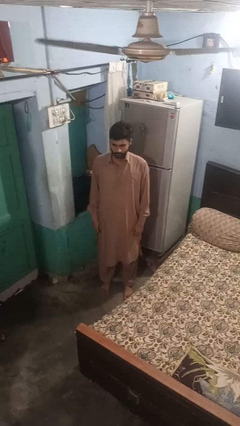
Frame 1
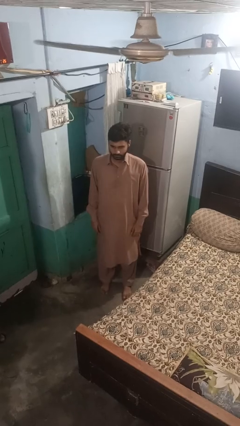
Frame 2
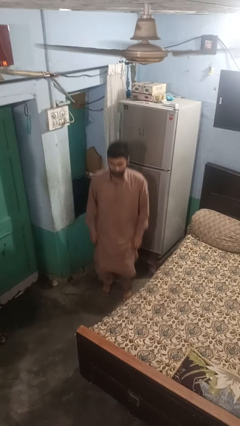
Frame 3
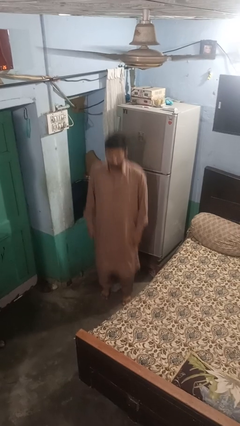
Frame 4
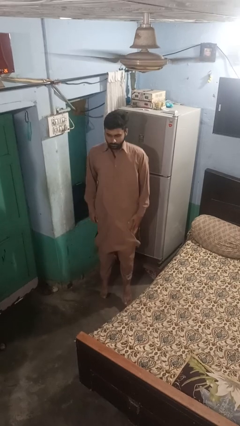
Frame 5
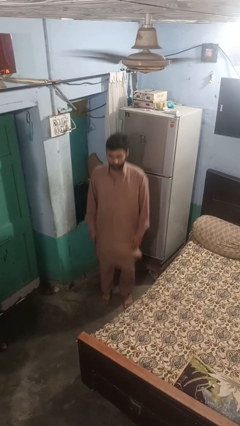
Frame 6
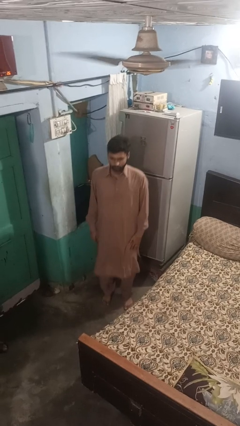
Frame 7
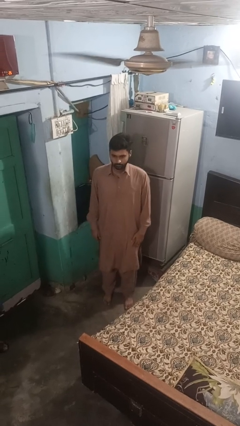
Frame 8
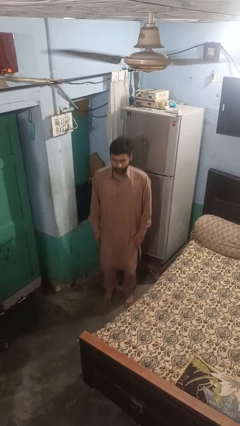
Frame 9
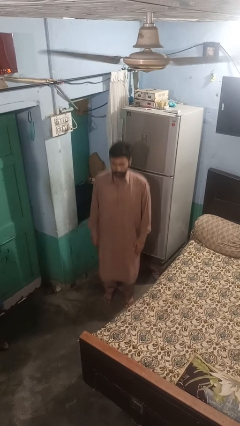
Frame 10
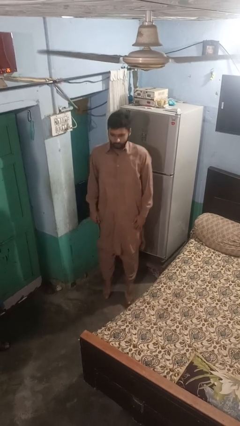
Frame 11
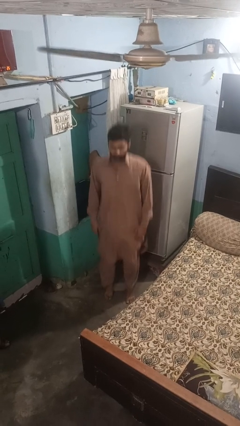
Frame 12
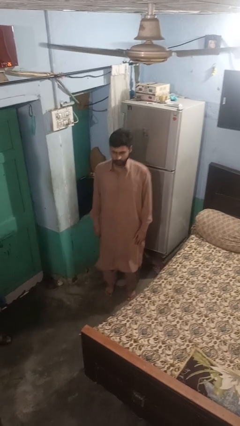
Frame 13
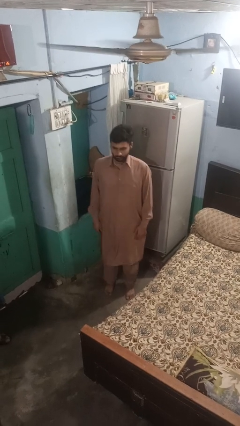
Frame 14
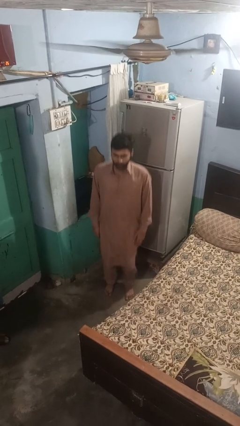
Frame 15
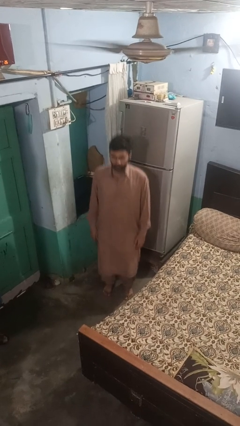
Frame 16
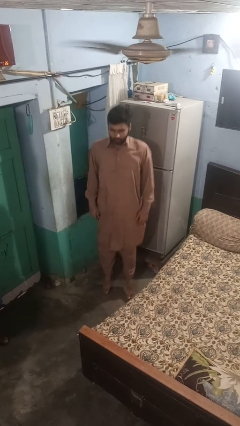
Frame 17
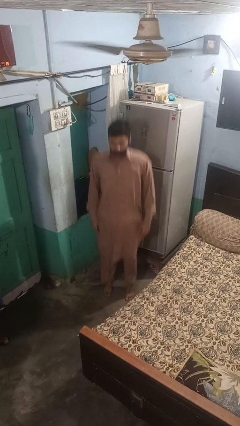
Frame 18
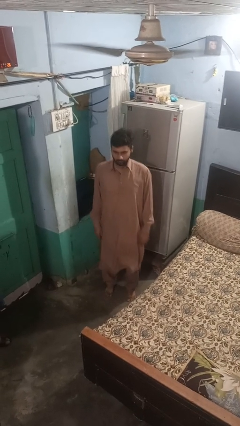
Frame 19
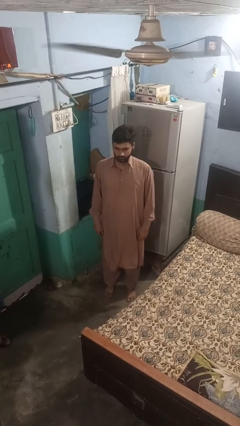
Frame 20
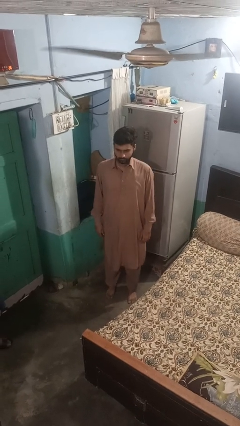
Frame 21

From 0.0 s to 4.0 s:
person jumps

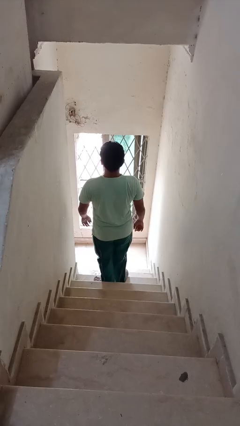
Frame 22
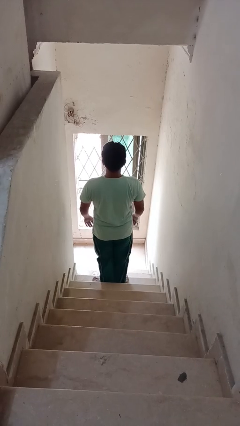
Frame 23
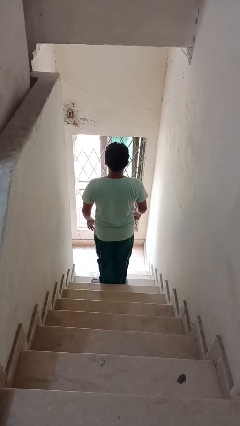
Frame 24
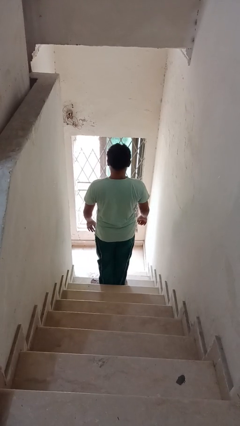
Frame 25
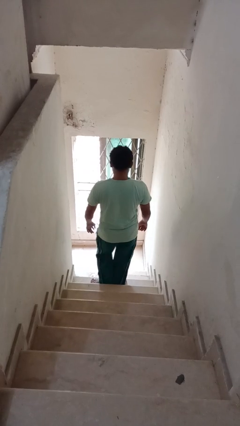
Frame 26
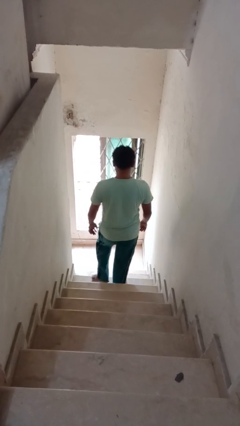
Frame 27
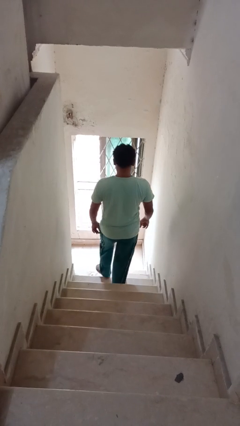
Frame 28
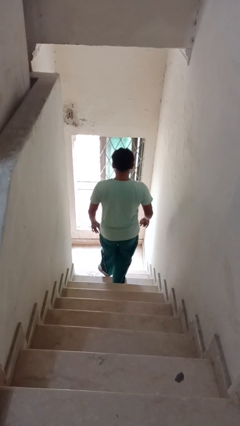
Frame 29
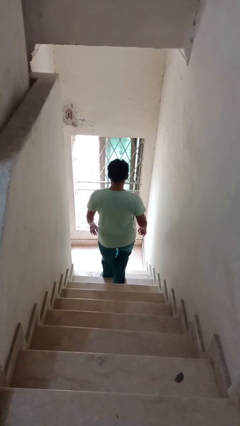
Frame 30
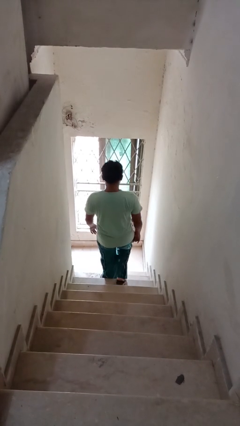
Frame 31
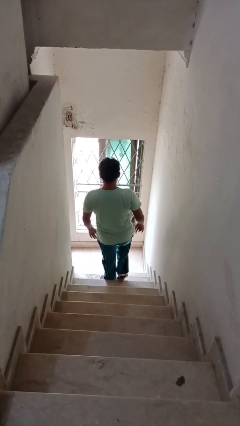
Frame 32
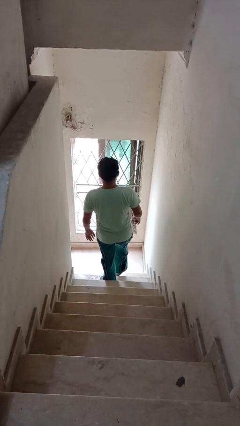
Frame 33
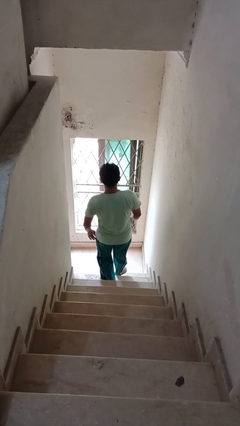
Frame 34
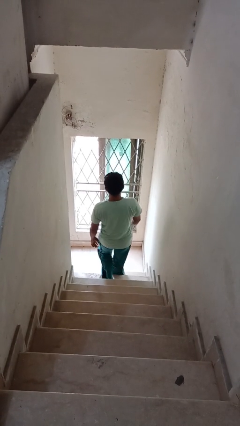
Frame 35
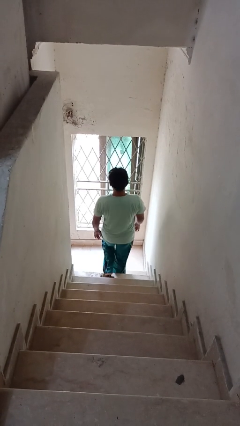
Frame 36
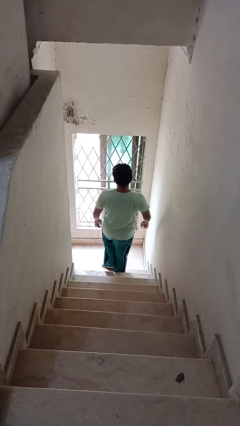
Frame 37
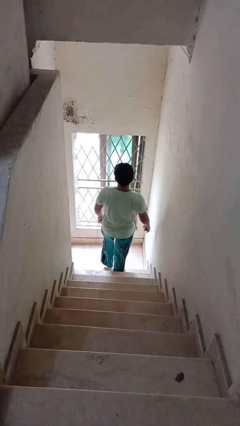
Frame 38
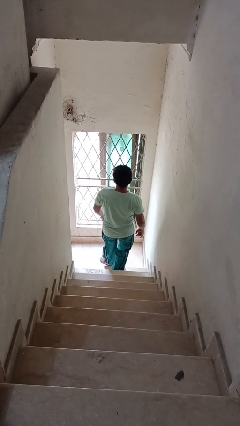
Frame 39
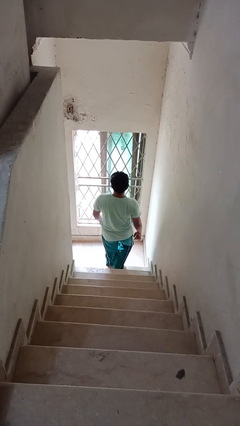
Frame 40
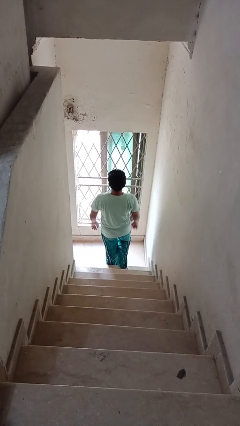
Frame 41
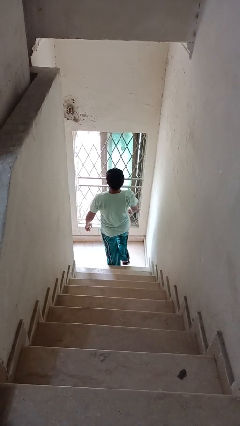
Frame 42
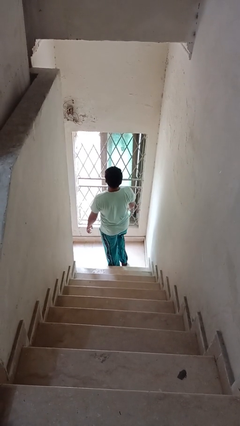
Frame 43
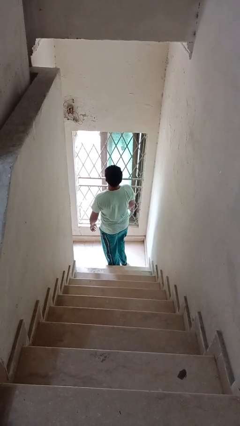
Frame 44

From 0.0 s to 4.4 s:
person climbs down stairs

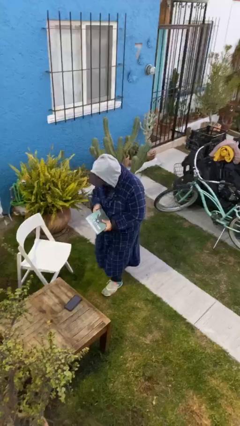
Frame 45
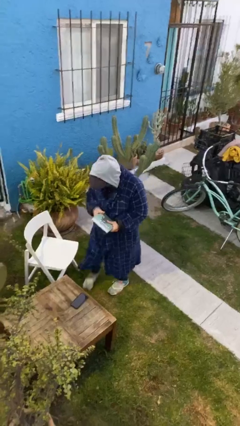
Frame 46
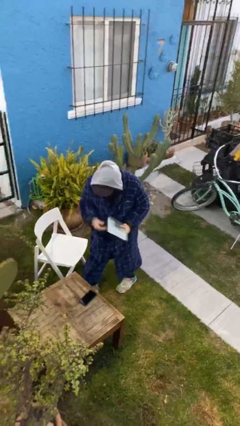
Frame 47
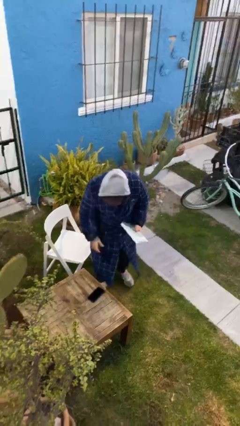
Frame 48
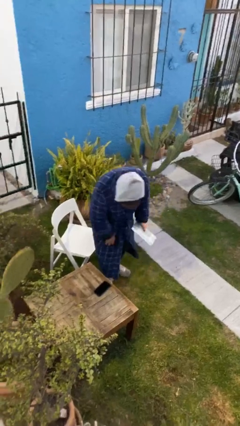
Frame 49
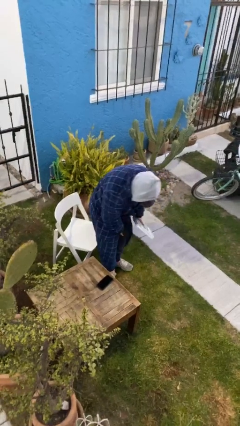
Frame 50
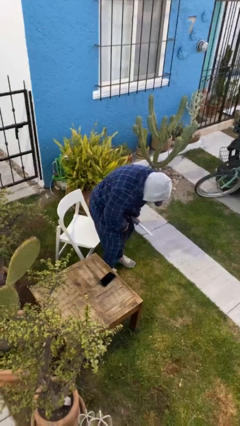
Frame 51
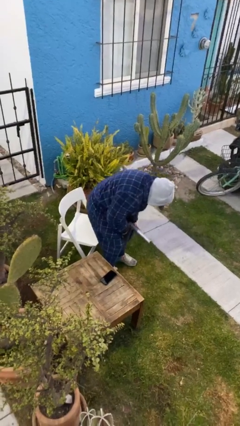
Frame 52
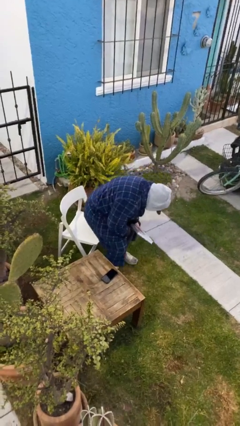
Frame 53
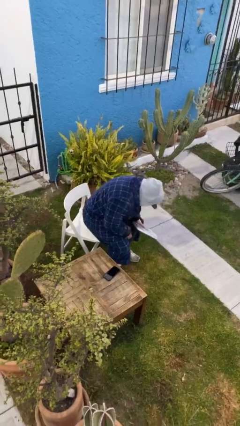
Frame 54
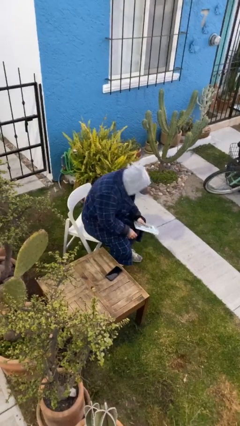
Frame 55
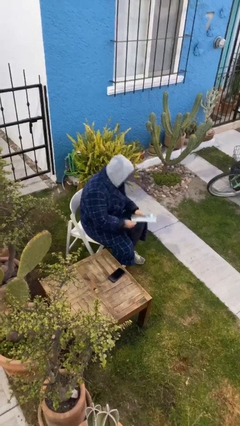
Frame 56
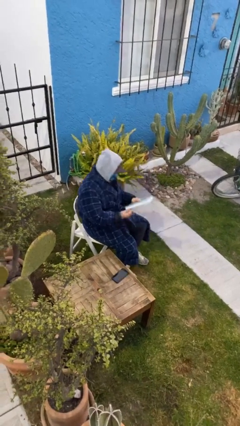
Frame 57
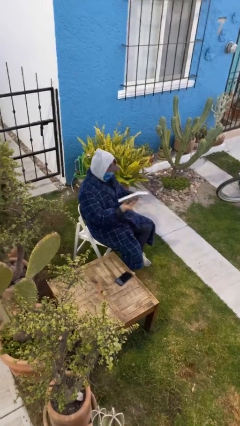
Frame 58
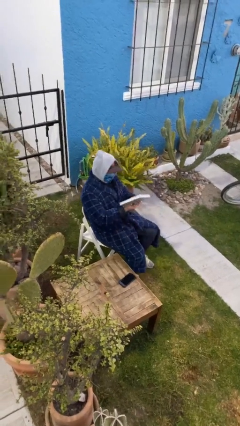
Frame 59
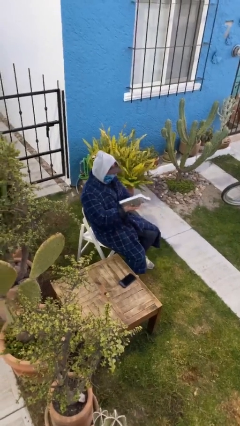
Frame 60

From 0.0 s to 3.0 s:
person sits down

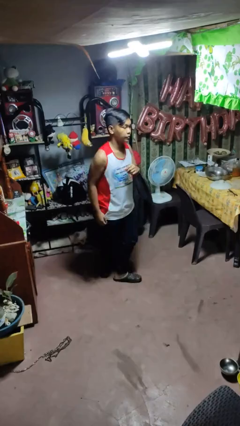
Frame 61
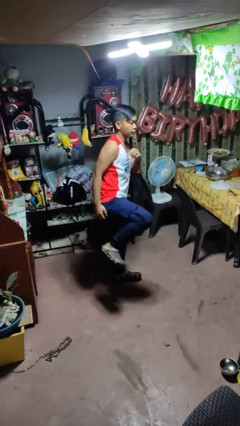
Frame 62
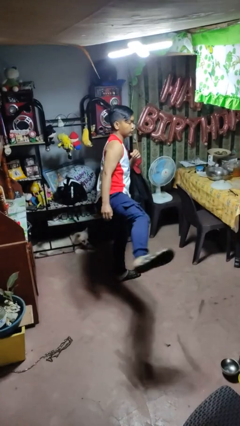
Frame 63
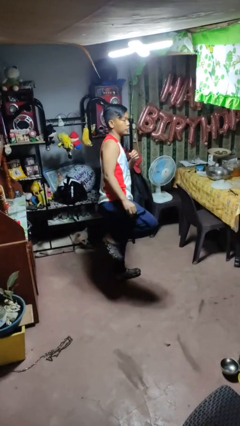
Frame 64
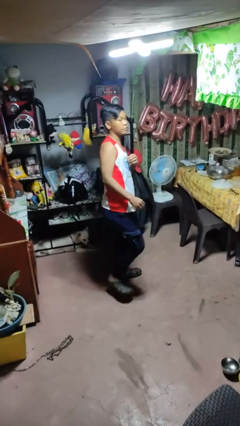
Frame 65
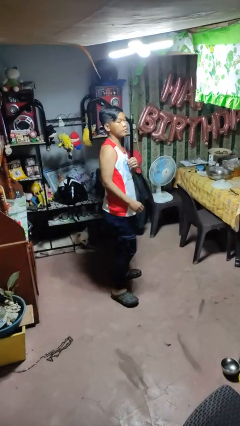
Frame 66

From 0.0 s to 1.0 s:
person karate kicks

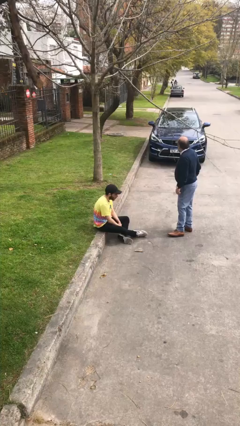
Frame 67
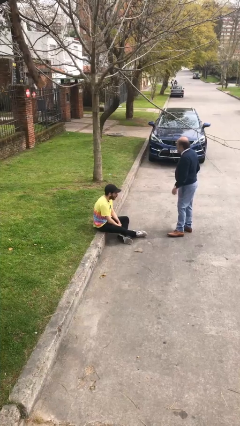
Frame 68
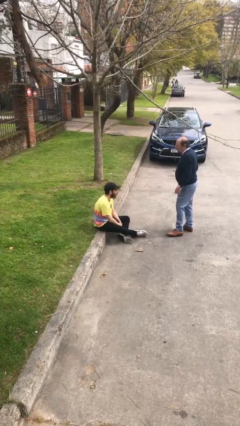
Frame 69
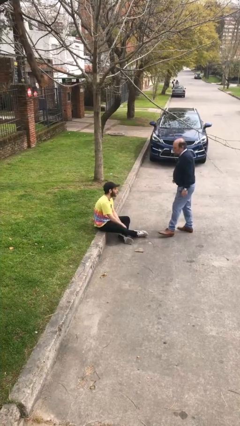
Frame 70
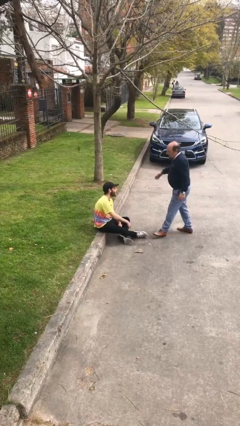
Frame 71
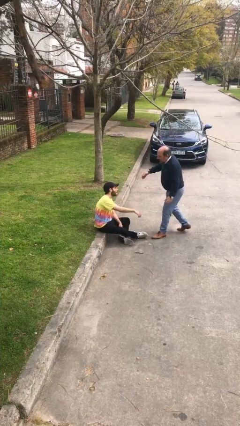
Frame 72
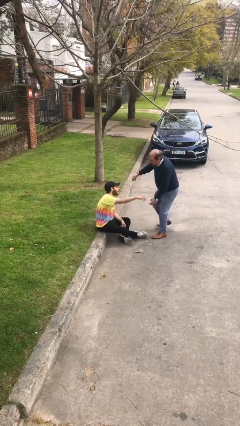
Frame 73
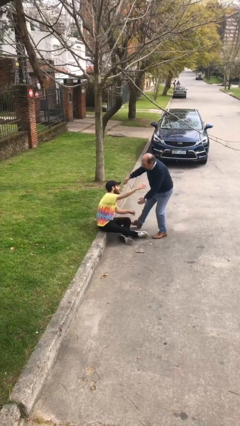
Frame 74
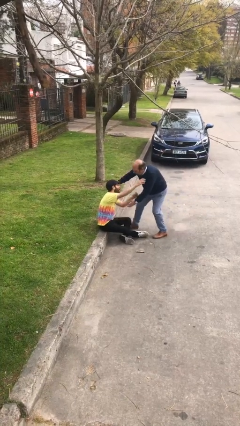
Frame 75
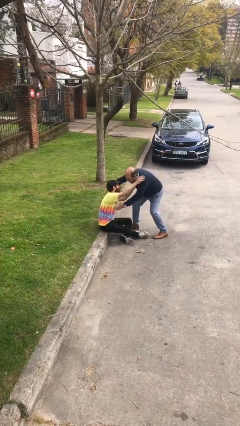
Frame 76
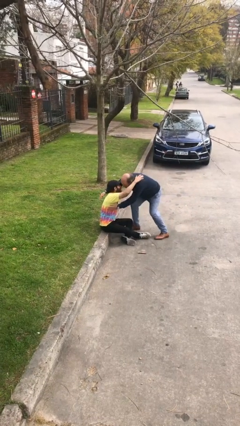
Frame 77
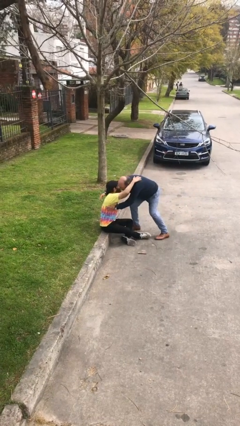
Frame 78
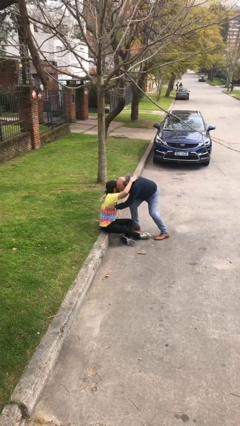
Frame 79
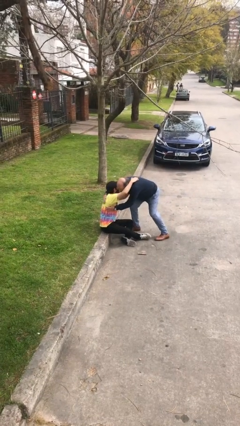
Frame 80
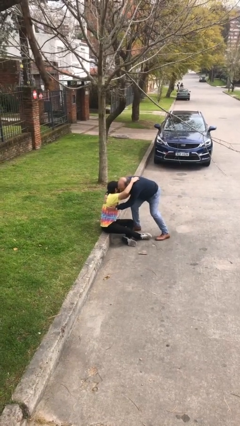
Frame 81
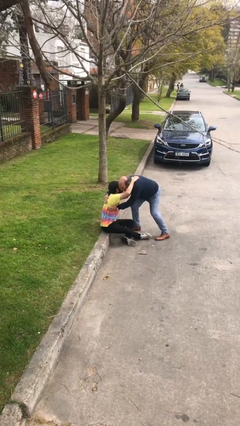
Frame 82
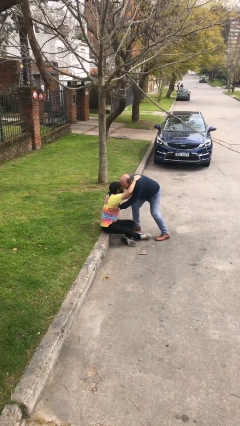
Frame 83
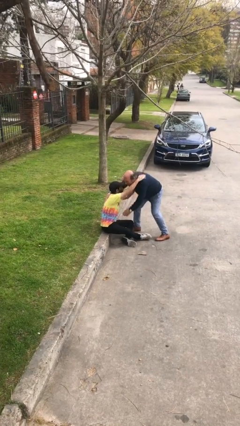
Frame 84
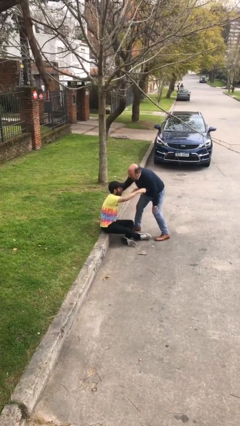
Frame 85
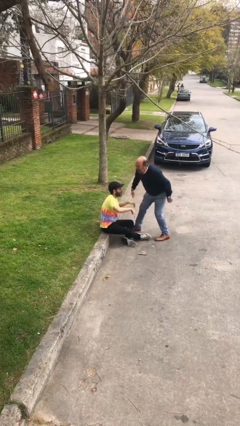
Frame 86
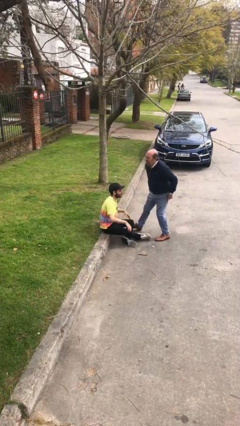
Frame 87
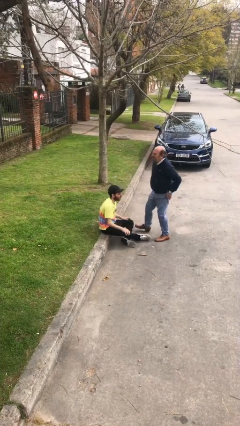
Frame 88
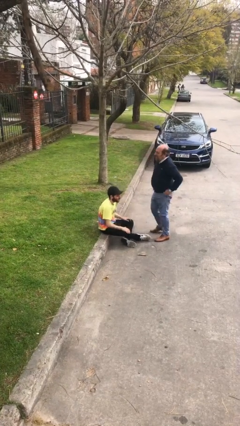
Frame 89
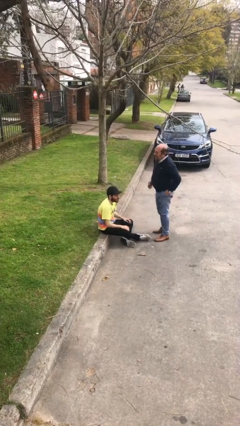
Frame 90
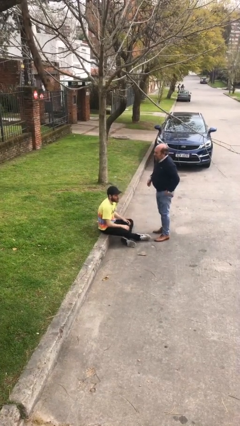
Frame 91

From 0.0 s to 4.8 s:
person embraces person

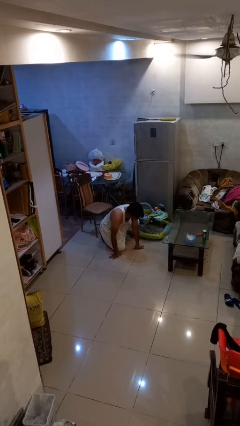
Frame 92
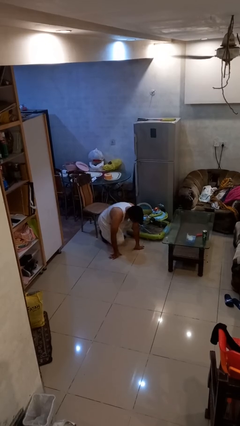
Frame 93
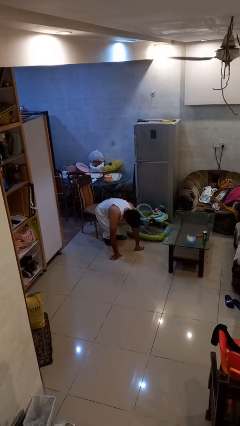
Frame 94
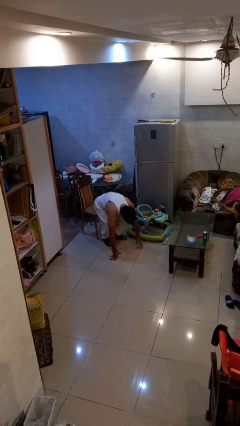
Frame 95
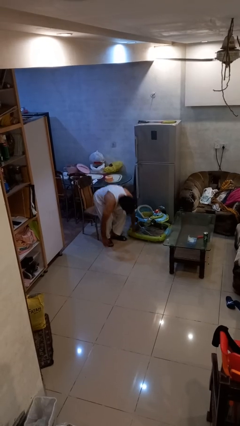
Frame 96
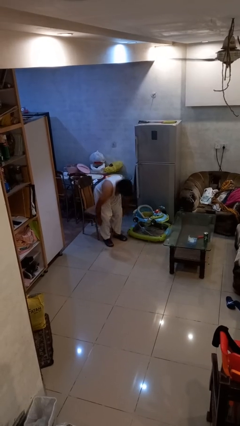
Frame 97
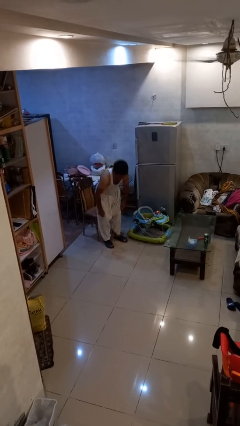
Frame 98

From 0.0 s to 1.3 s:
person stands up from floor
